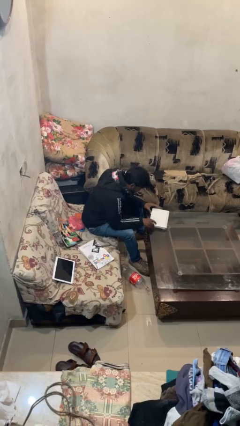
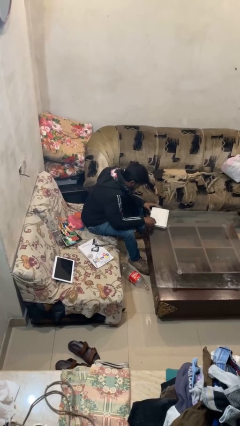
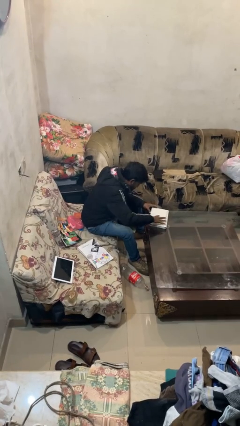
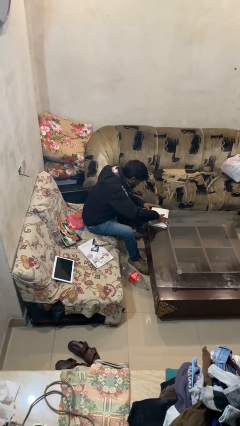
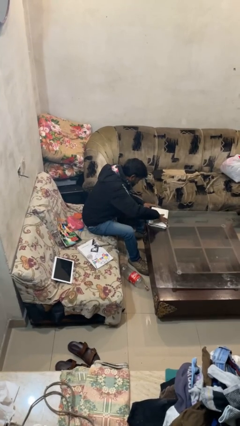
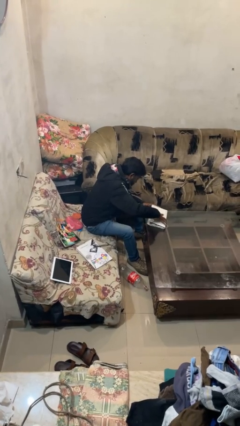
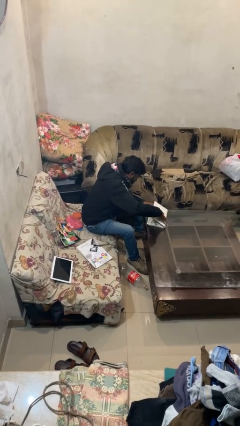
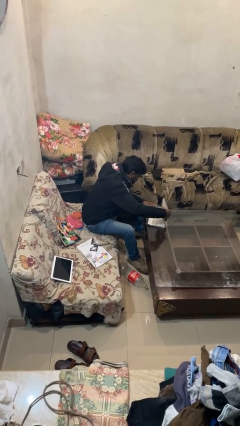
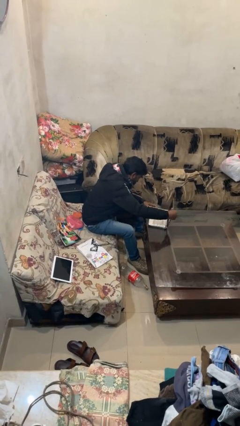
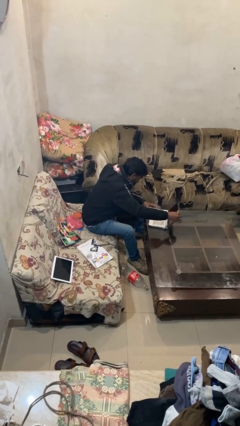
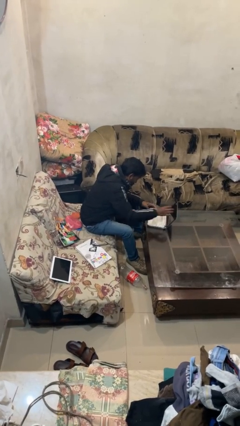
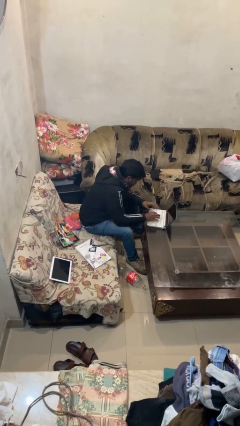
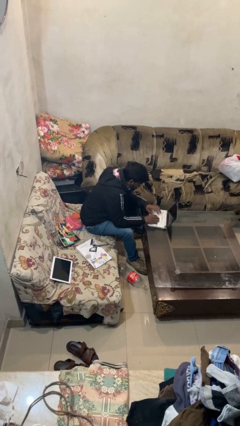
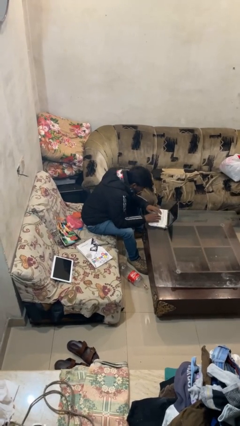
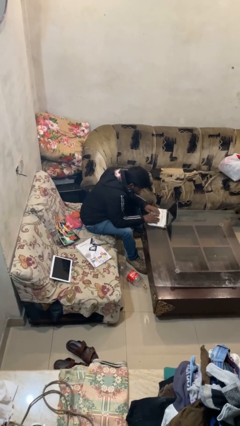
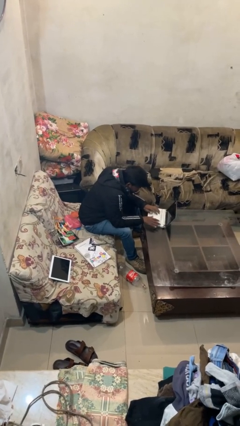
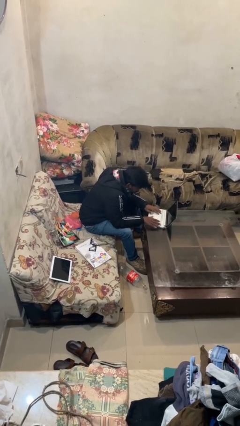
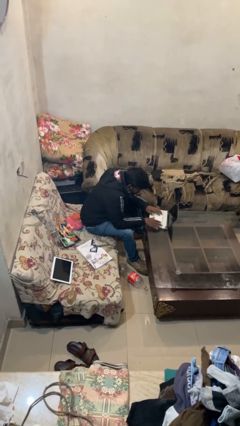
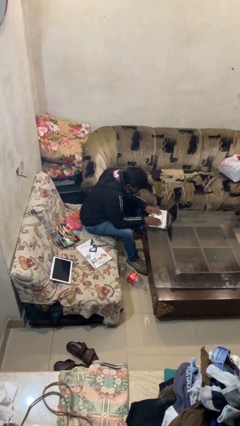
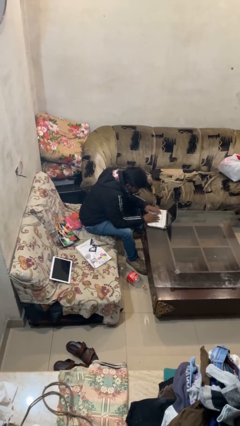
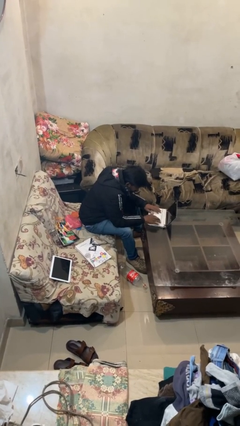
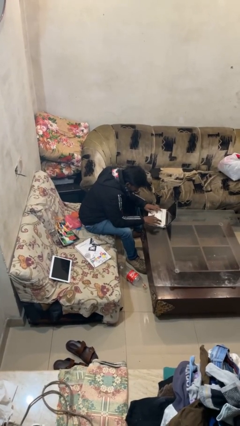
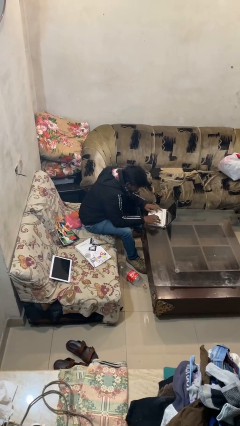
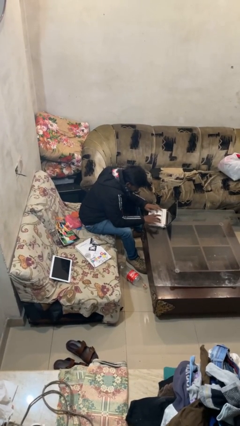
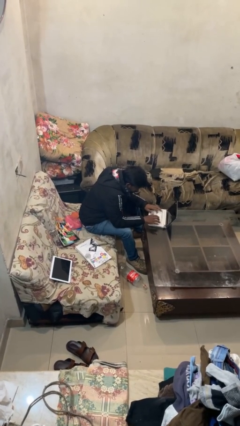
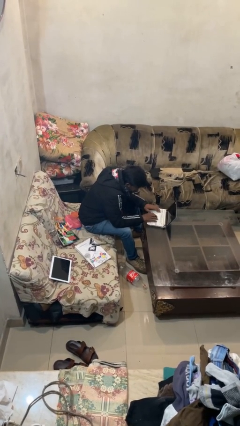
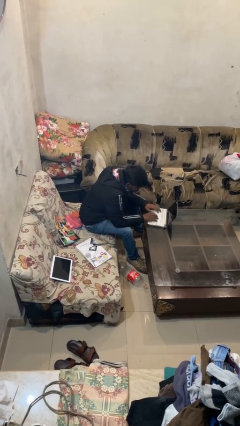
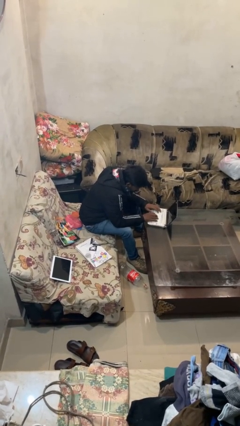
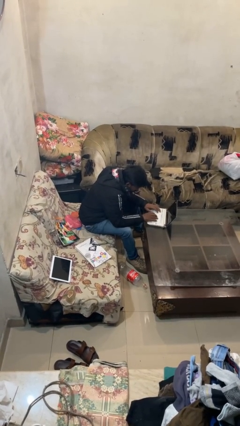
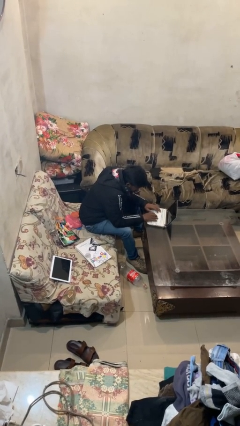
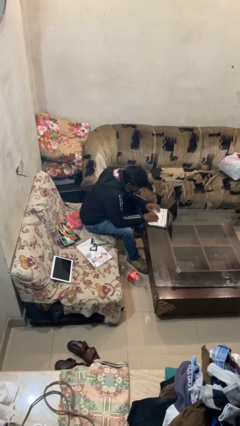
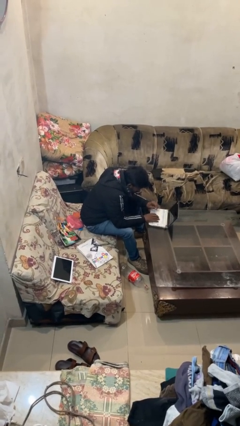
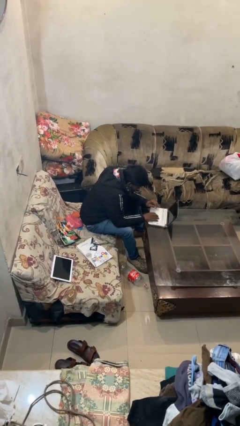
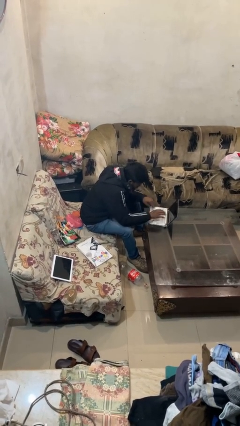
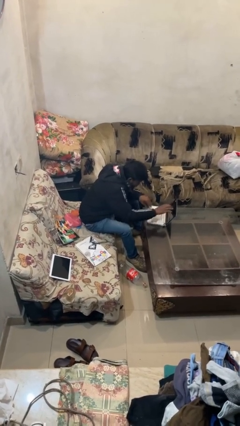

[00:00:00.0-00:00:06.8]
person interacts with laptop

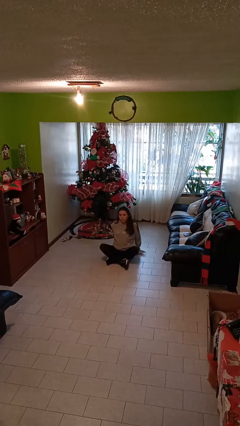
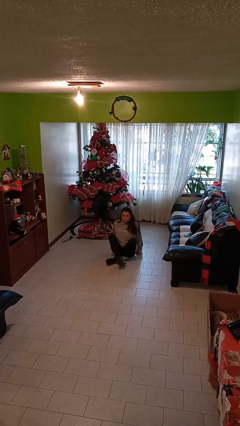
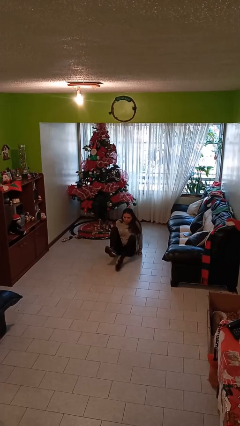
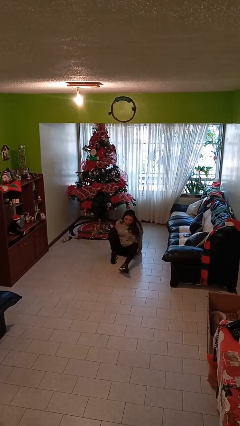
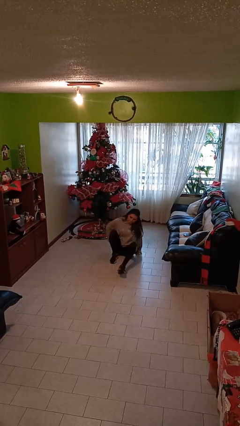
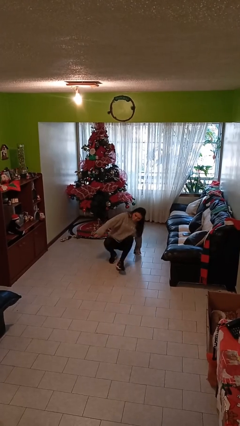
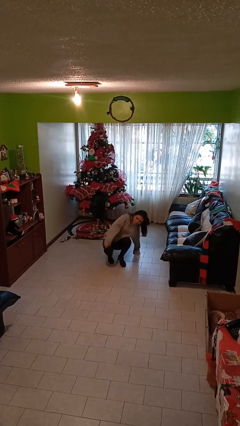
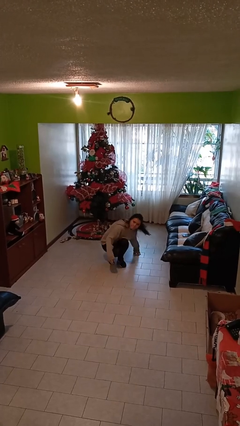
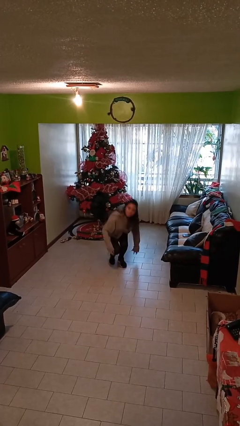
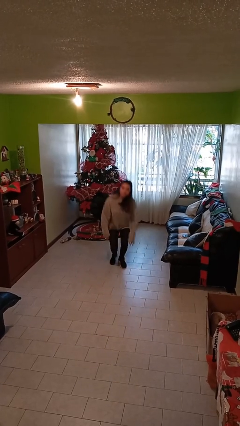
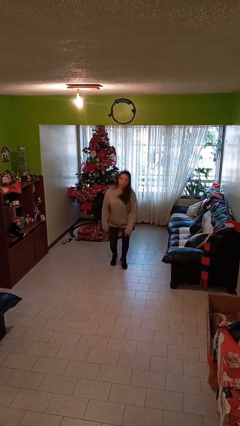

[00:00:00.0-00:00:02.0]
person stands up

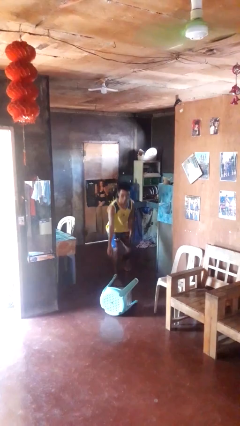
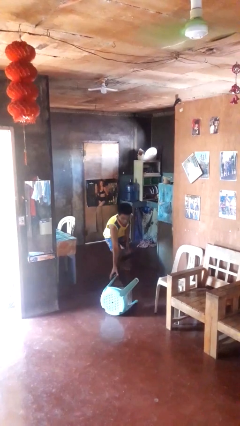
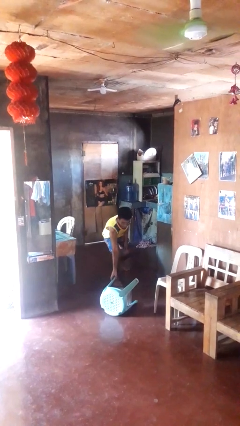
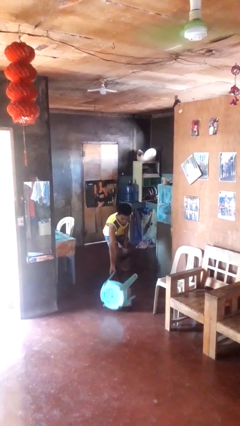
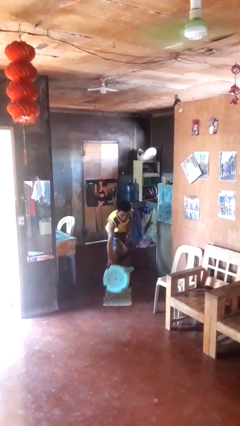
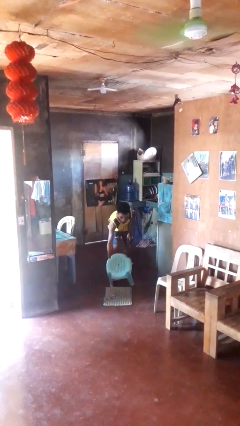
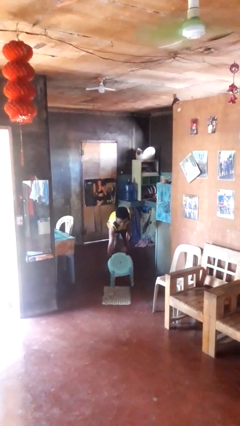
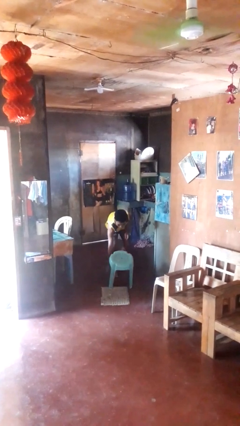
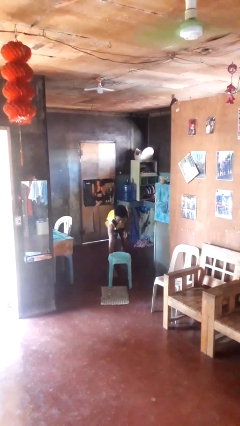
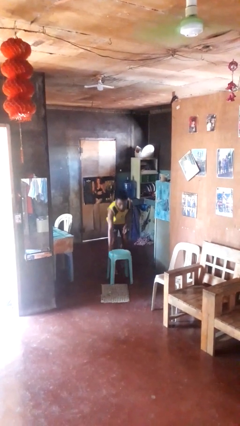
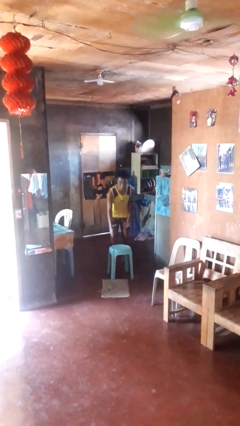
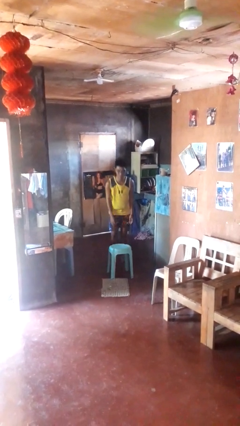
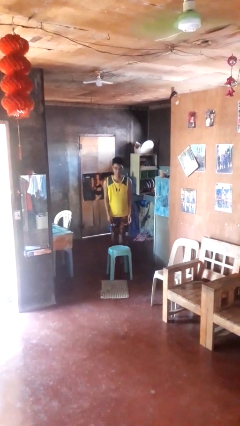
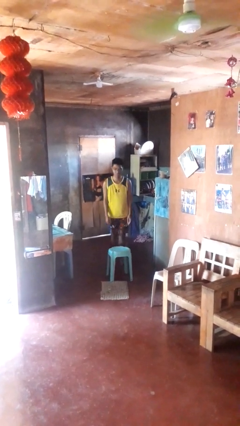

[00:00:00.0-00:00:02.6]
person sets upright furniture

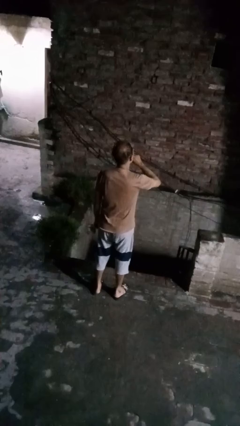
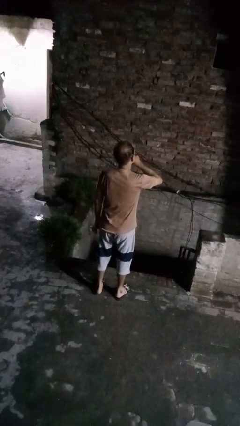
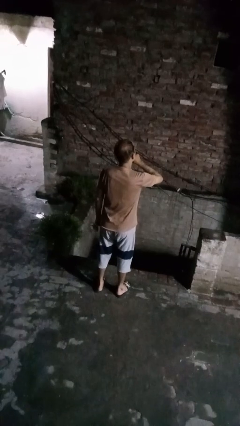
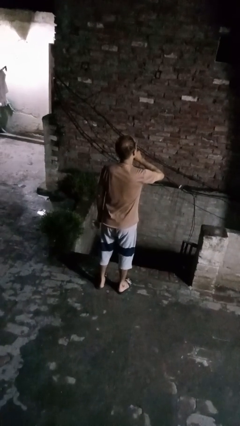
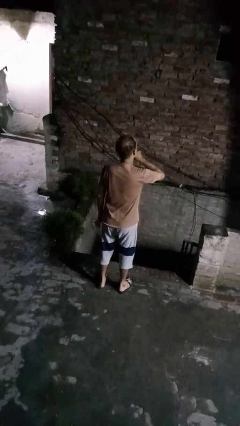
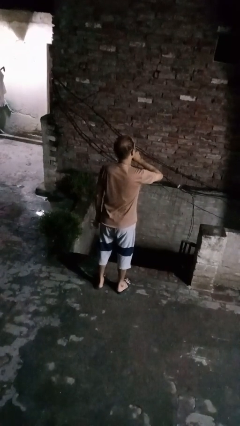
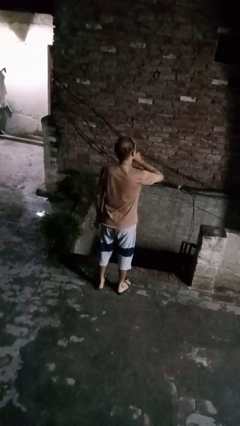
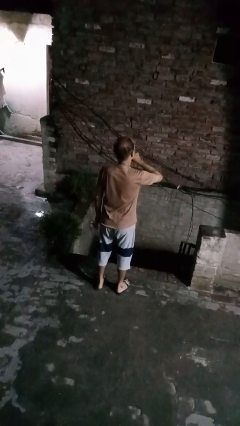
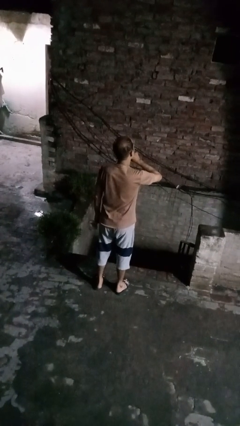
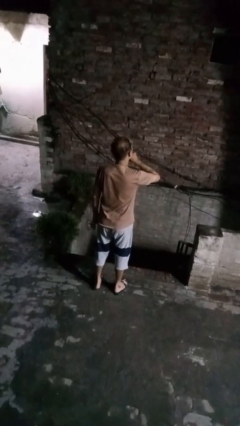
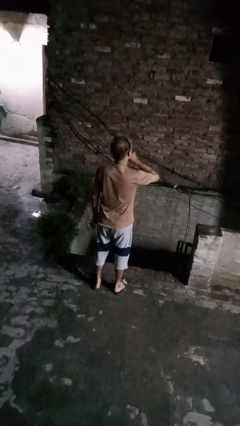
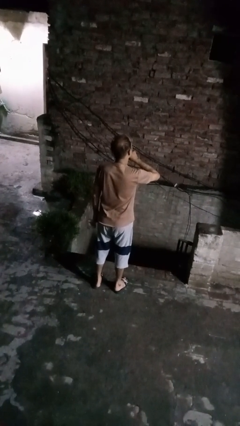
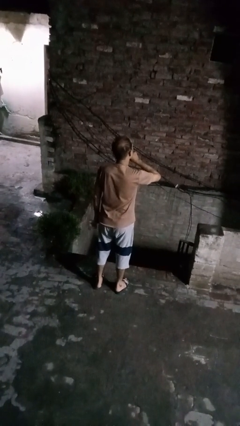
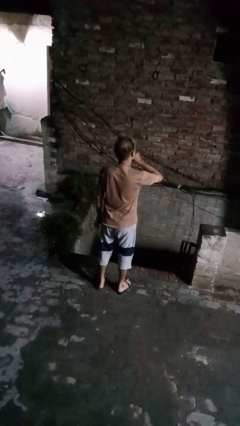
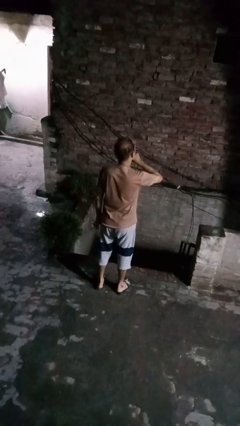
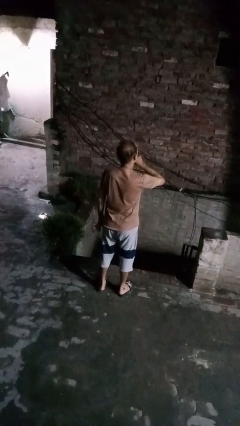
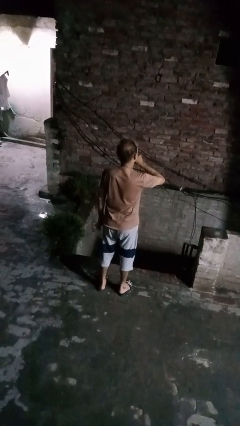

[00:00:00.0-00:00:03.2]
person gestures be quiet

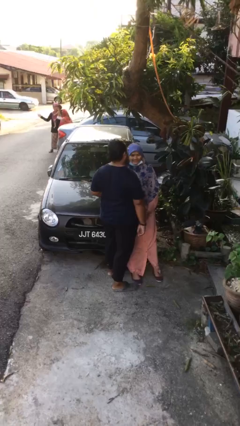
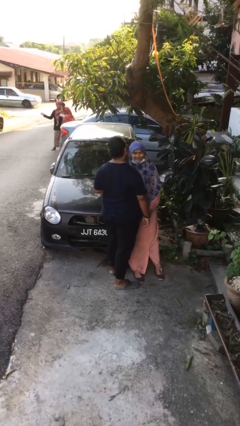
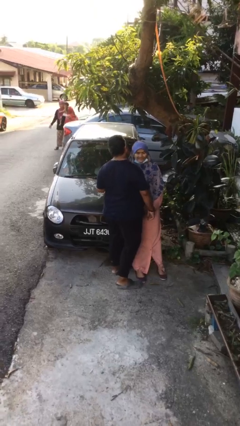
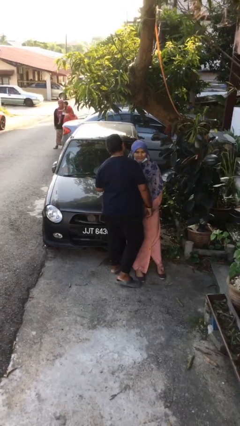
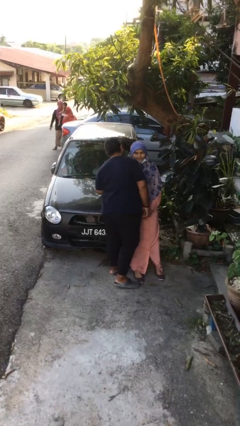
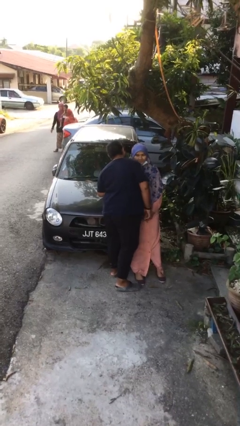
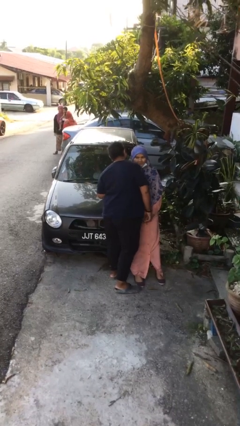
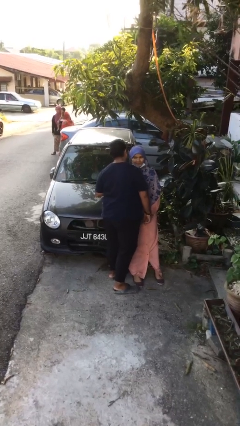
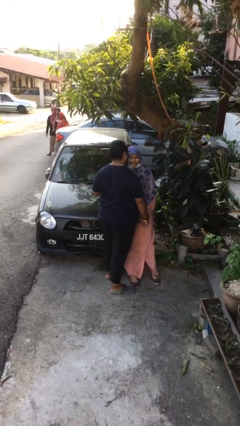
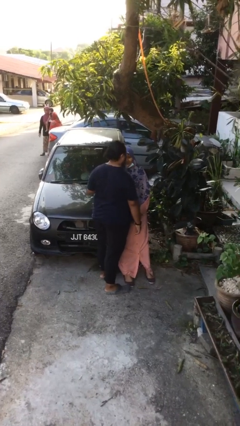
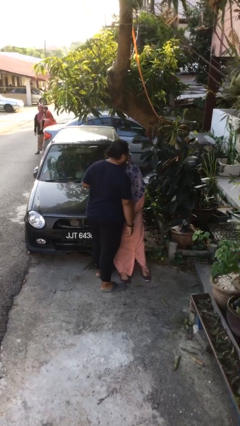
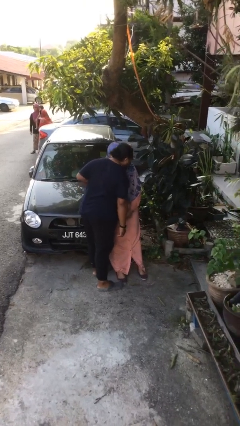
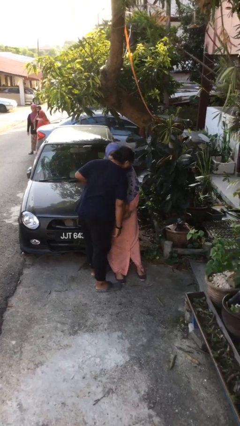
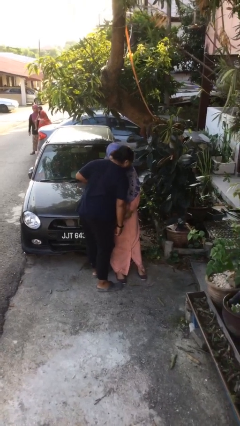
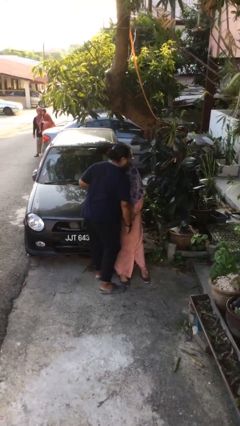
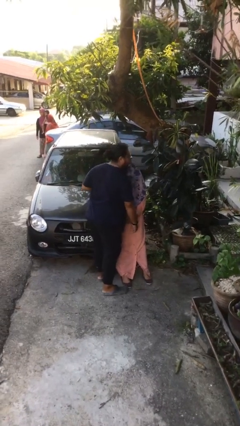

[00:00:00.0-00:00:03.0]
person kisses cheek of person

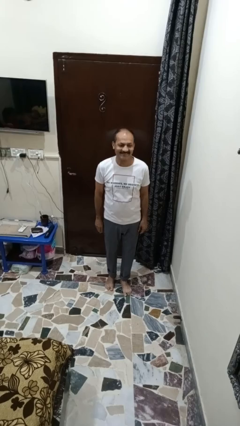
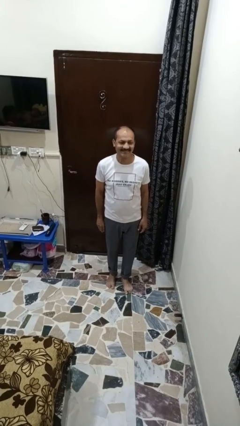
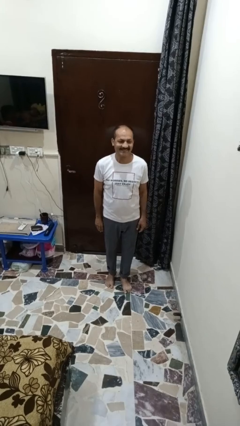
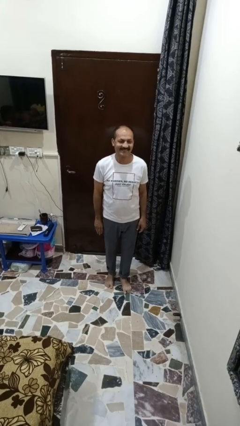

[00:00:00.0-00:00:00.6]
person salutes
